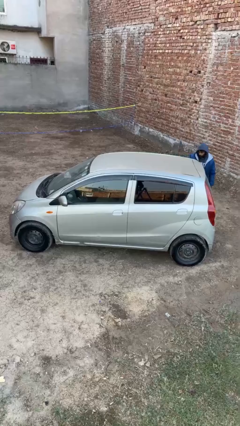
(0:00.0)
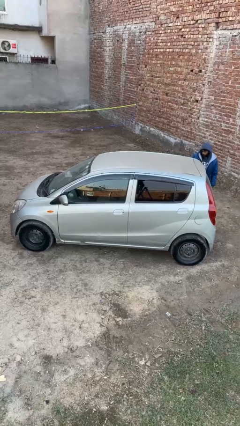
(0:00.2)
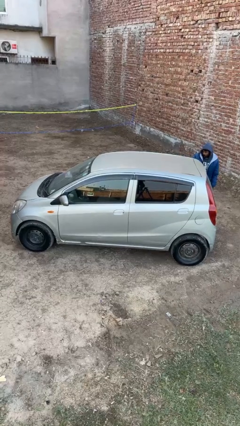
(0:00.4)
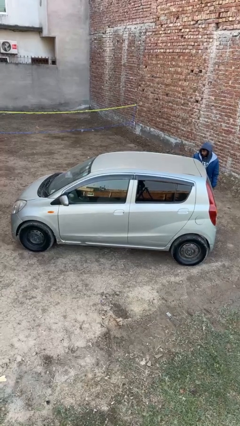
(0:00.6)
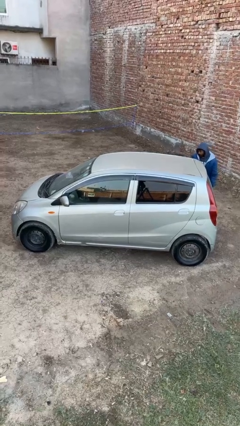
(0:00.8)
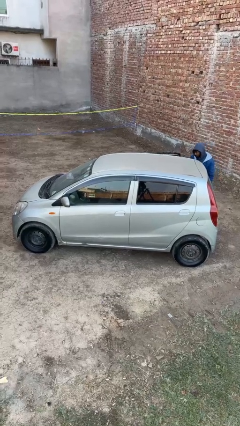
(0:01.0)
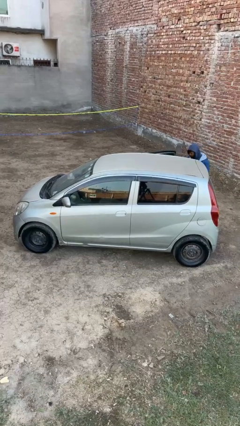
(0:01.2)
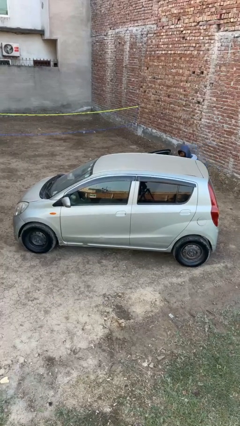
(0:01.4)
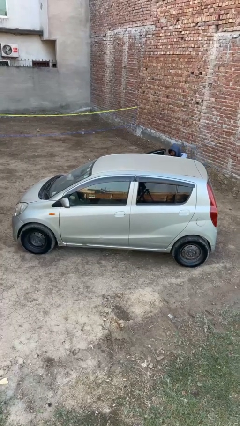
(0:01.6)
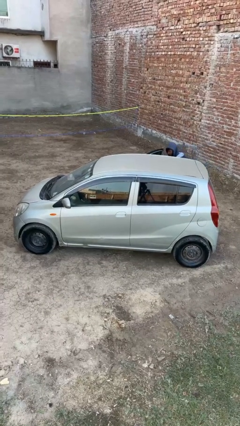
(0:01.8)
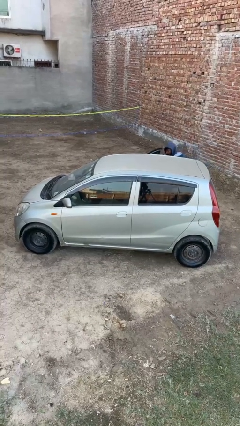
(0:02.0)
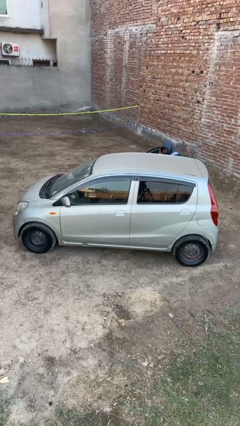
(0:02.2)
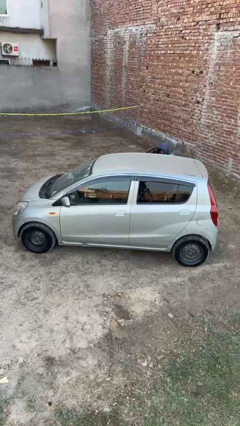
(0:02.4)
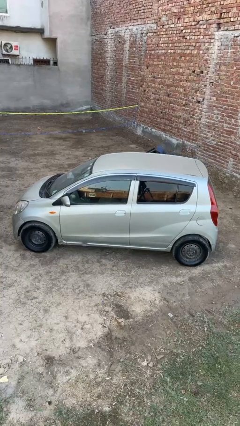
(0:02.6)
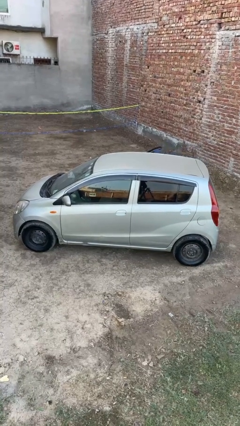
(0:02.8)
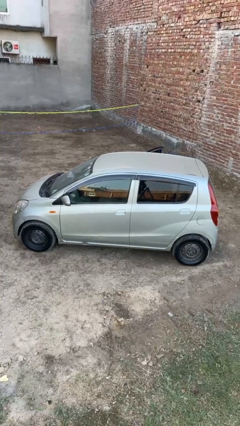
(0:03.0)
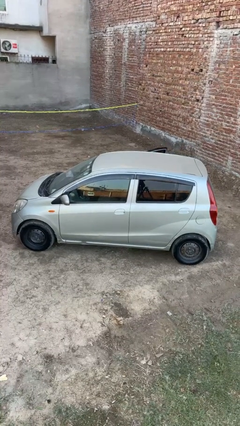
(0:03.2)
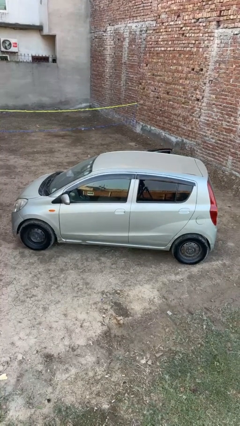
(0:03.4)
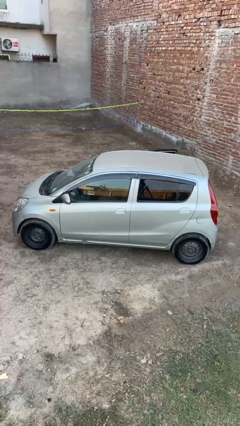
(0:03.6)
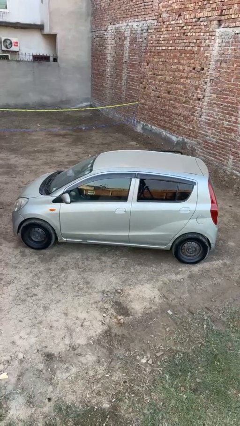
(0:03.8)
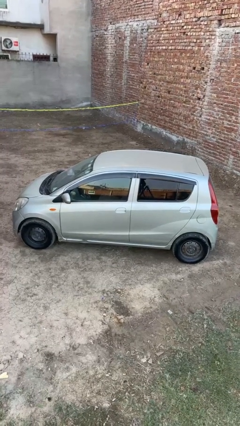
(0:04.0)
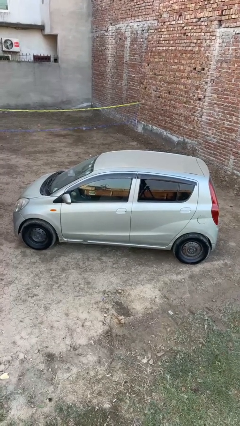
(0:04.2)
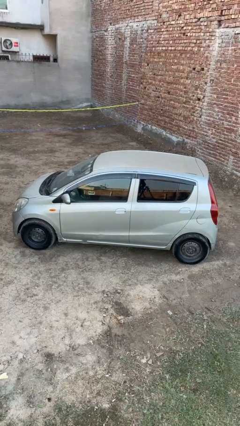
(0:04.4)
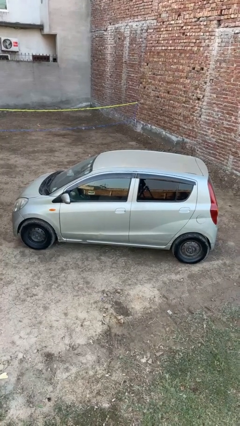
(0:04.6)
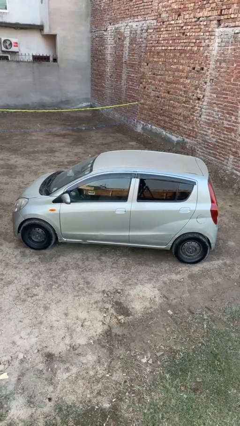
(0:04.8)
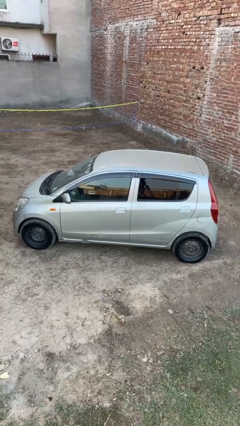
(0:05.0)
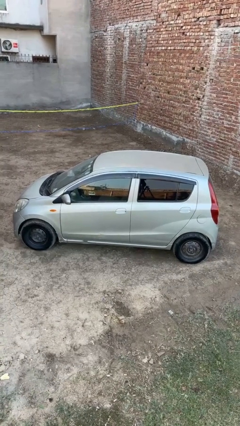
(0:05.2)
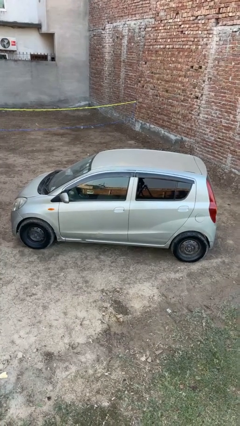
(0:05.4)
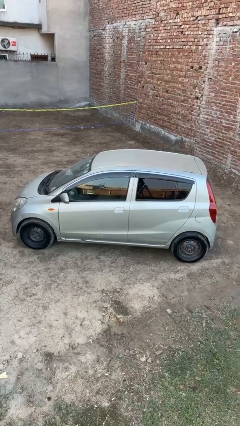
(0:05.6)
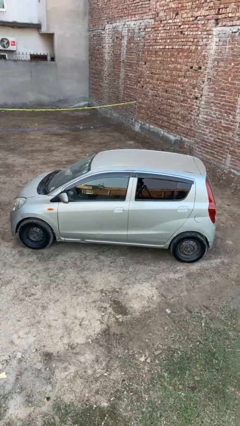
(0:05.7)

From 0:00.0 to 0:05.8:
car picks up person

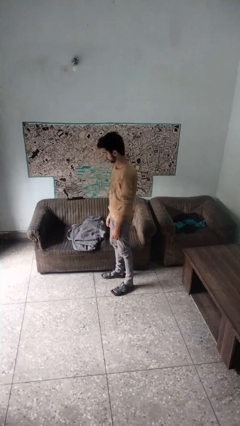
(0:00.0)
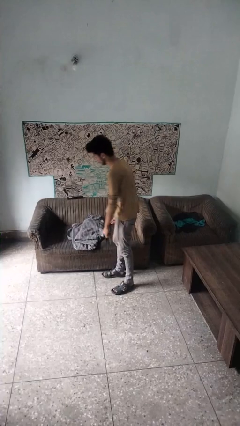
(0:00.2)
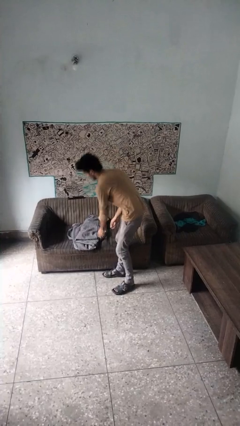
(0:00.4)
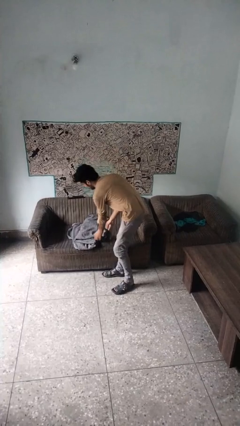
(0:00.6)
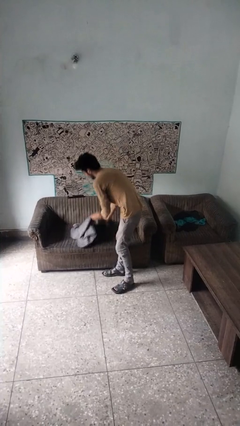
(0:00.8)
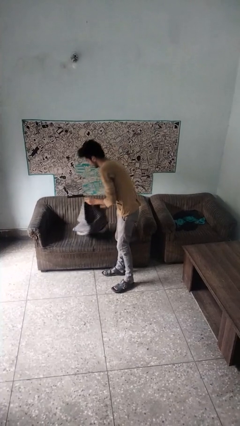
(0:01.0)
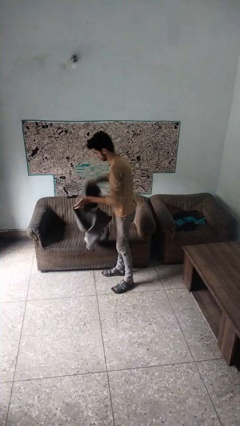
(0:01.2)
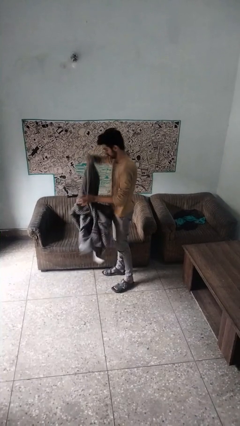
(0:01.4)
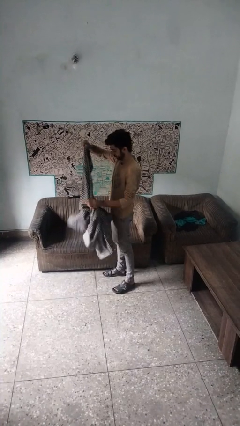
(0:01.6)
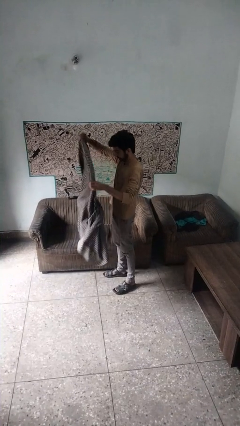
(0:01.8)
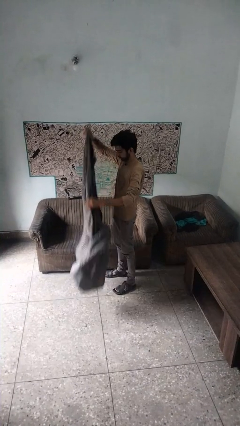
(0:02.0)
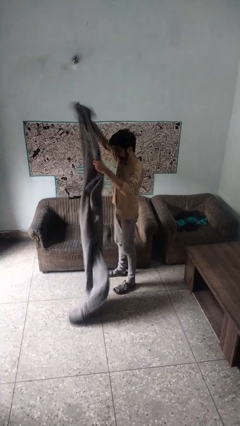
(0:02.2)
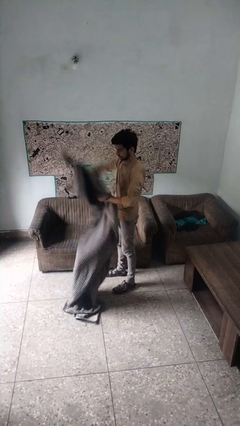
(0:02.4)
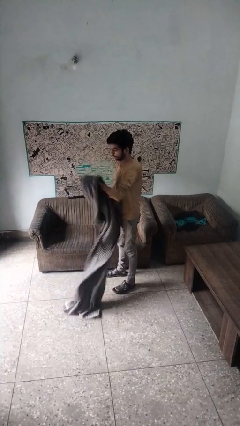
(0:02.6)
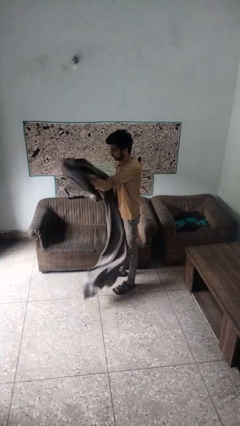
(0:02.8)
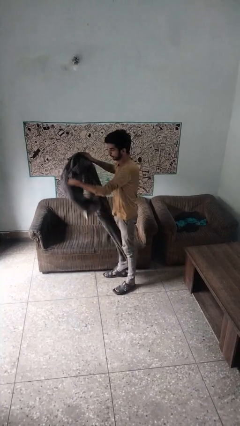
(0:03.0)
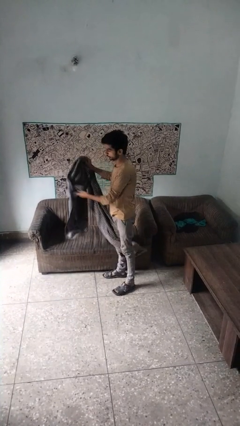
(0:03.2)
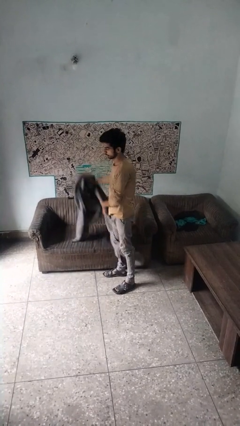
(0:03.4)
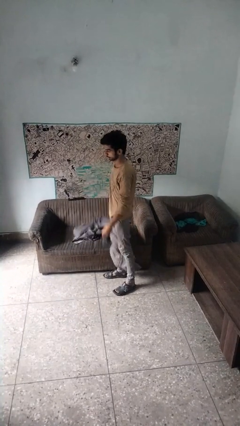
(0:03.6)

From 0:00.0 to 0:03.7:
person unfolds blanket

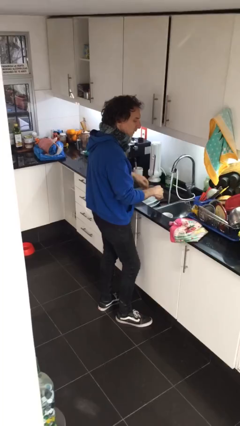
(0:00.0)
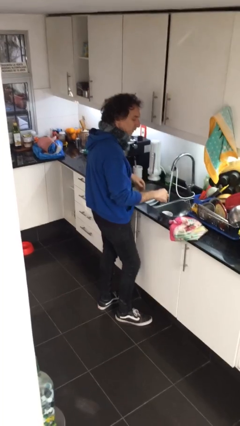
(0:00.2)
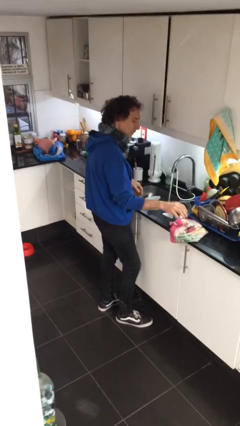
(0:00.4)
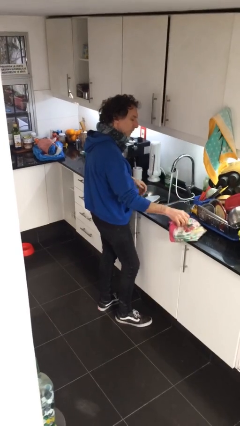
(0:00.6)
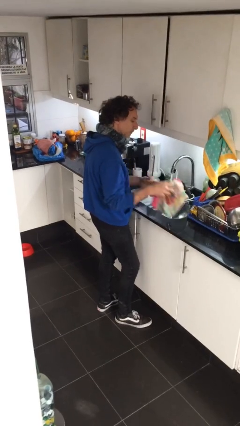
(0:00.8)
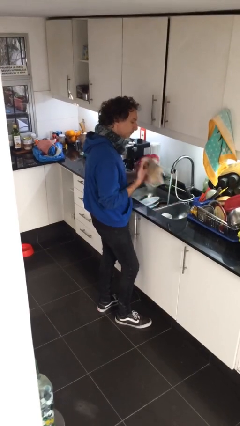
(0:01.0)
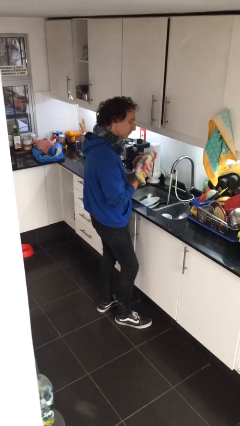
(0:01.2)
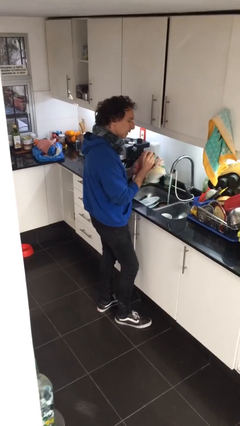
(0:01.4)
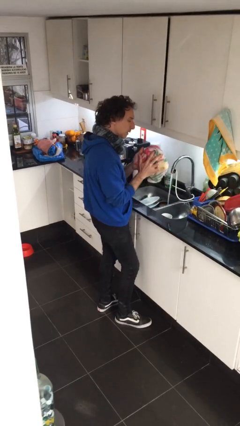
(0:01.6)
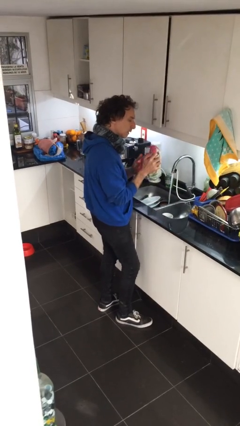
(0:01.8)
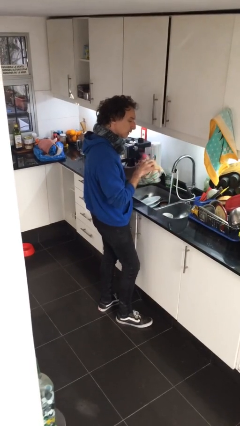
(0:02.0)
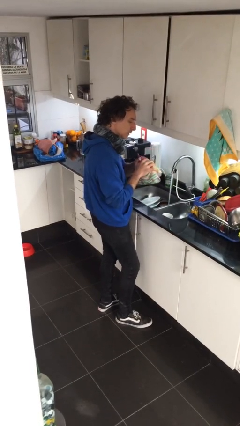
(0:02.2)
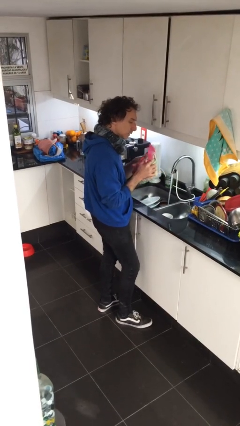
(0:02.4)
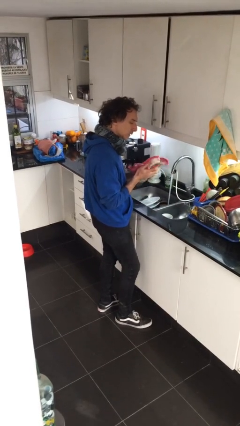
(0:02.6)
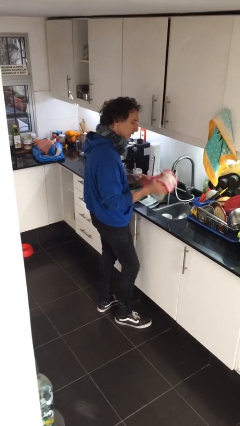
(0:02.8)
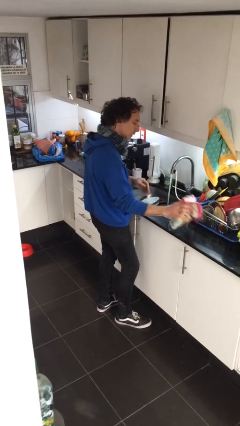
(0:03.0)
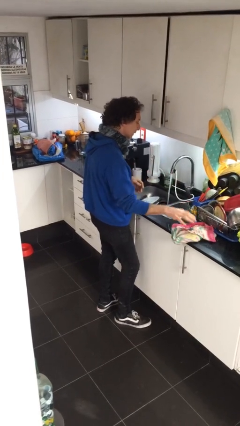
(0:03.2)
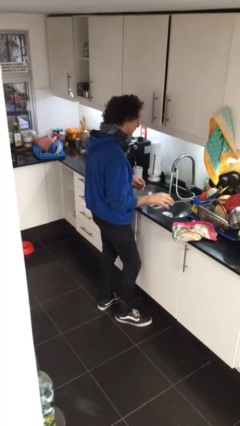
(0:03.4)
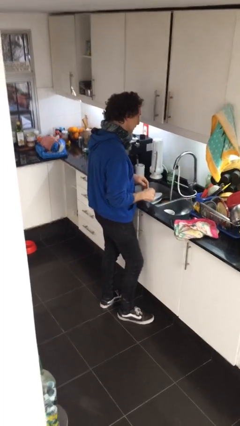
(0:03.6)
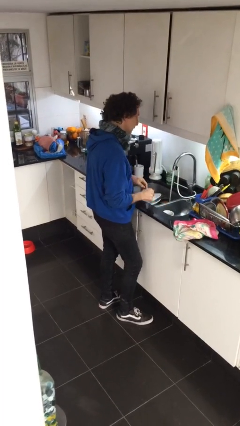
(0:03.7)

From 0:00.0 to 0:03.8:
person dries hands with towel

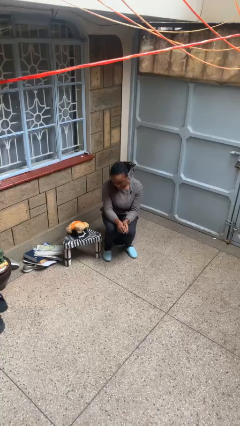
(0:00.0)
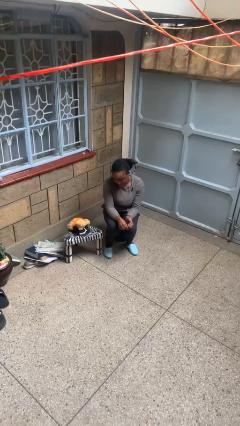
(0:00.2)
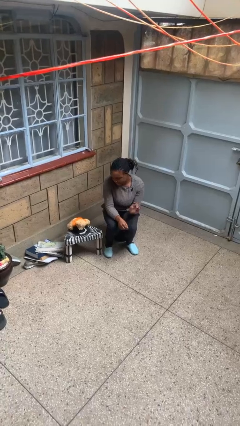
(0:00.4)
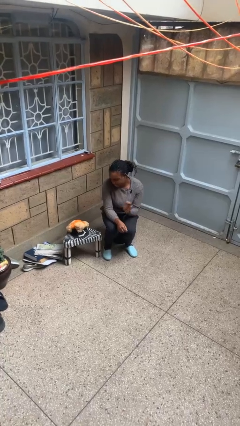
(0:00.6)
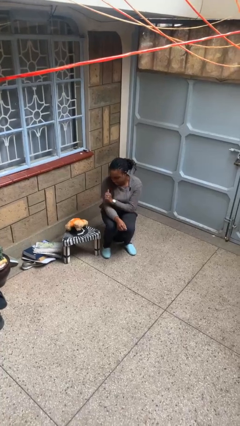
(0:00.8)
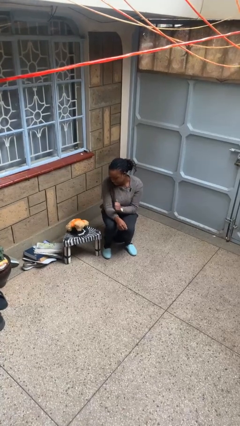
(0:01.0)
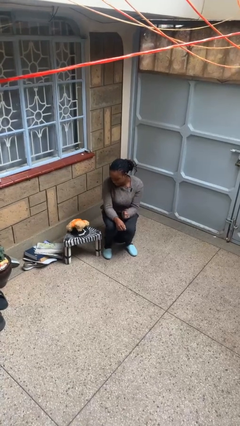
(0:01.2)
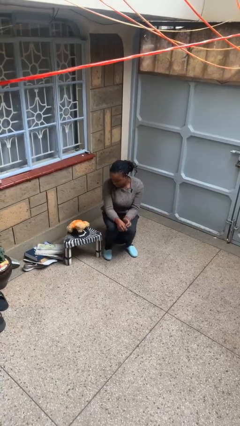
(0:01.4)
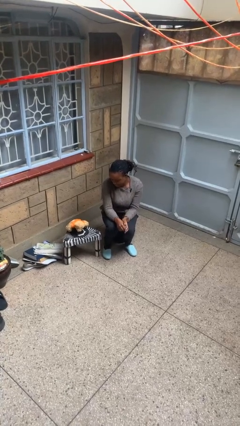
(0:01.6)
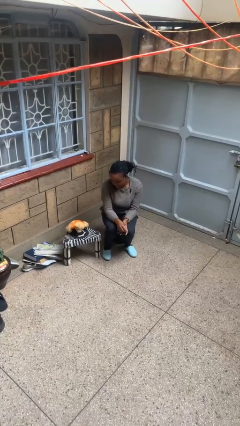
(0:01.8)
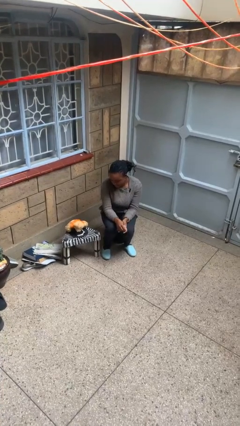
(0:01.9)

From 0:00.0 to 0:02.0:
person swats bug

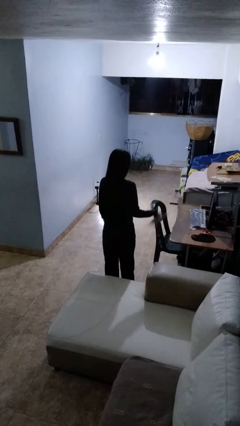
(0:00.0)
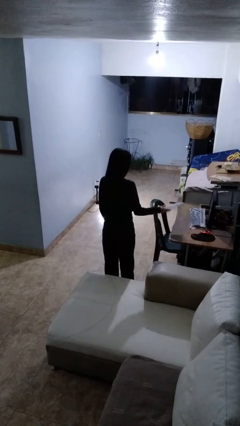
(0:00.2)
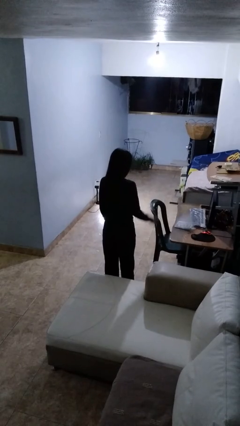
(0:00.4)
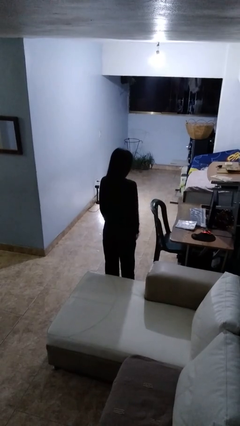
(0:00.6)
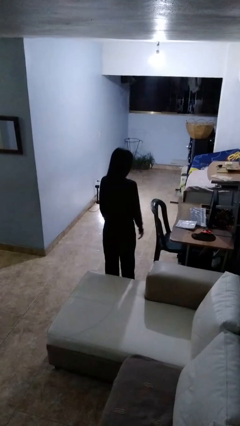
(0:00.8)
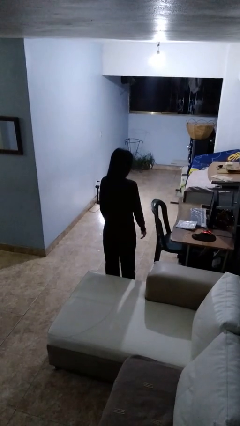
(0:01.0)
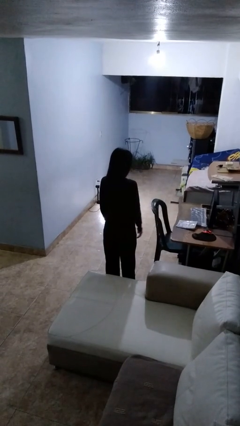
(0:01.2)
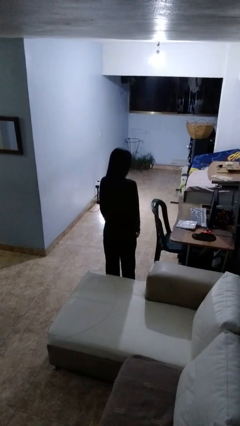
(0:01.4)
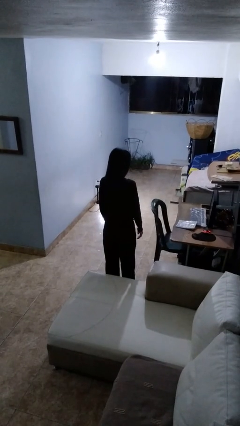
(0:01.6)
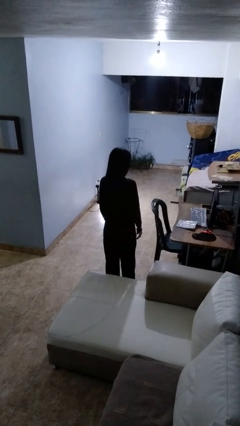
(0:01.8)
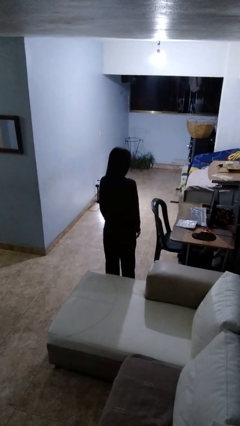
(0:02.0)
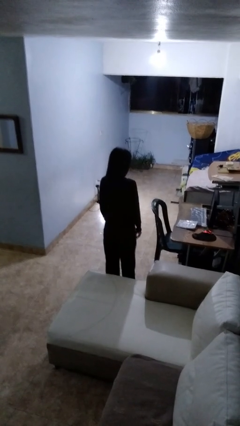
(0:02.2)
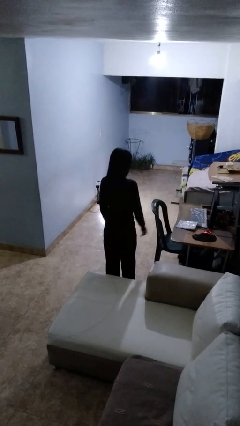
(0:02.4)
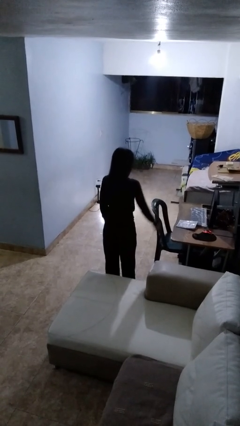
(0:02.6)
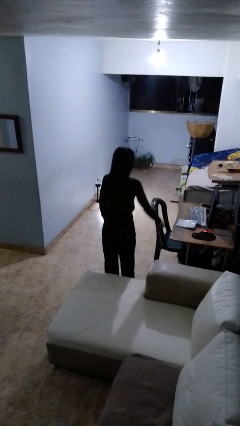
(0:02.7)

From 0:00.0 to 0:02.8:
person throws object on table
